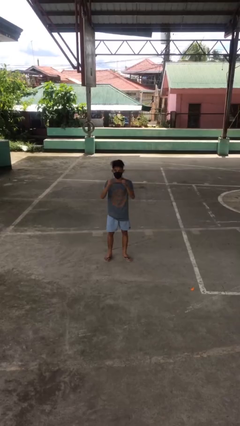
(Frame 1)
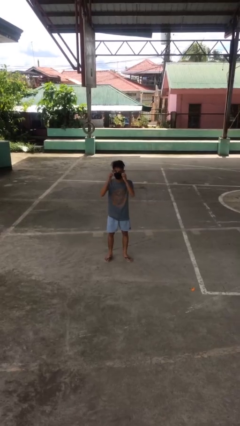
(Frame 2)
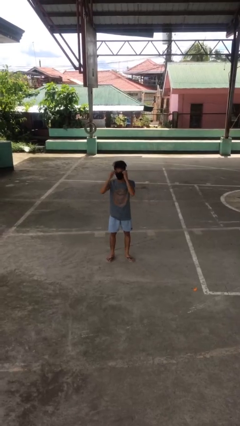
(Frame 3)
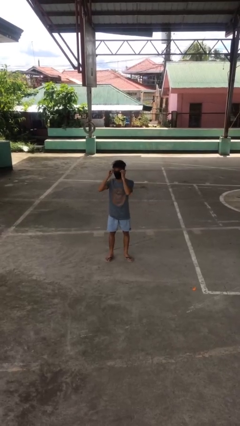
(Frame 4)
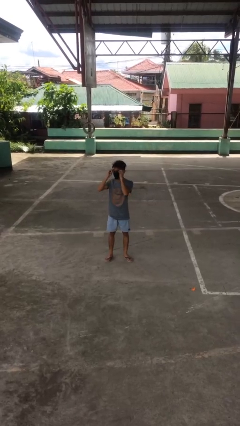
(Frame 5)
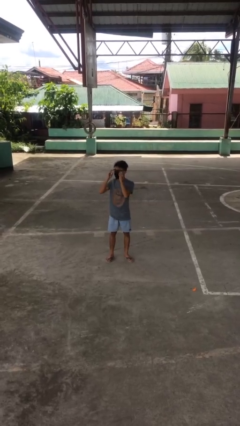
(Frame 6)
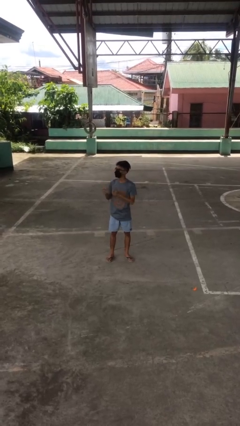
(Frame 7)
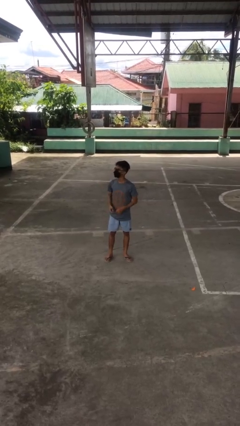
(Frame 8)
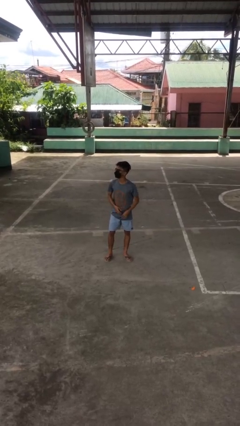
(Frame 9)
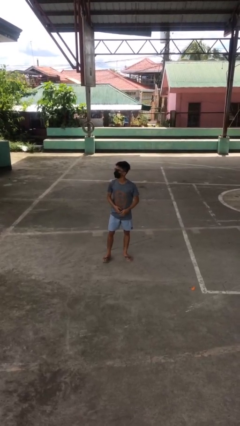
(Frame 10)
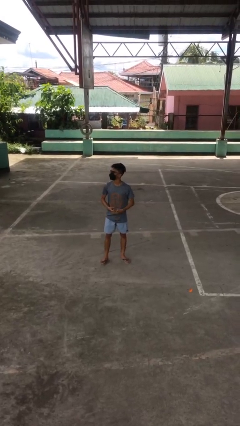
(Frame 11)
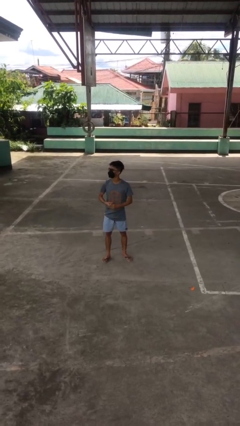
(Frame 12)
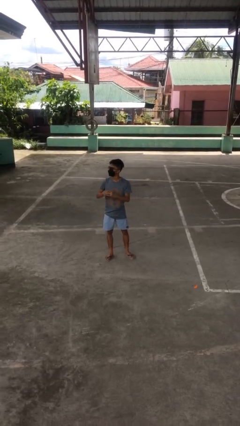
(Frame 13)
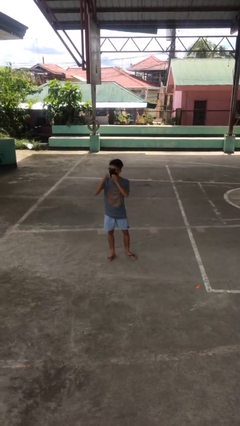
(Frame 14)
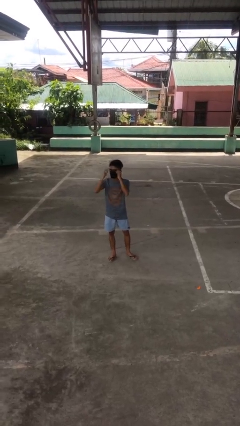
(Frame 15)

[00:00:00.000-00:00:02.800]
person puts on glasses

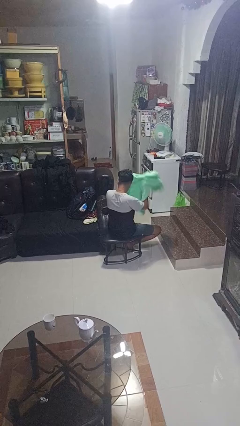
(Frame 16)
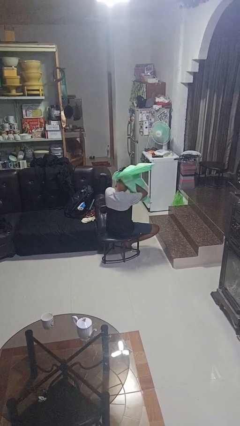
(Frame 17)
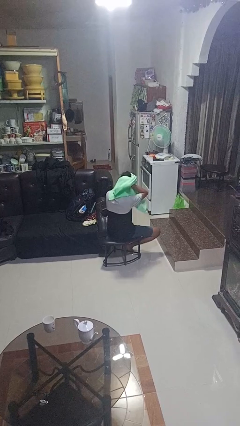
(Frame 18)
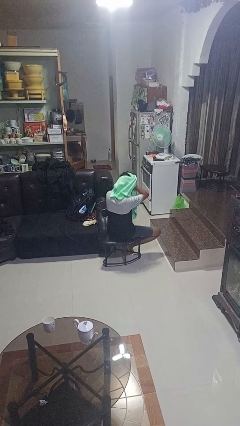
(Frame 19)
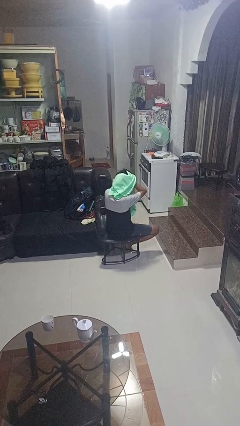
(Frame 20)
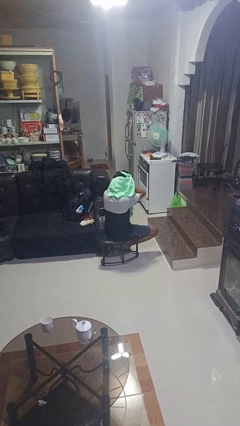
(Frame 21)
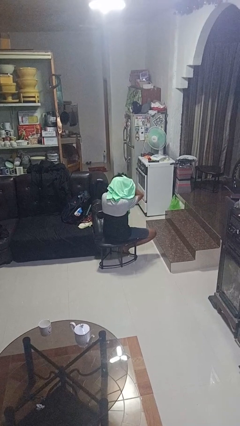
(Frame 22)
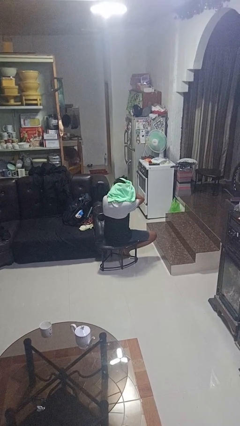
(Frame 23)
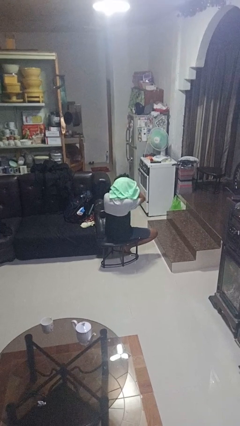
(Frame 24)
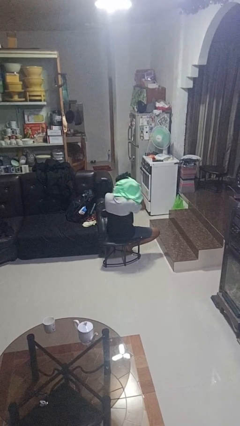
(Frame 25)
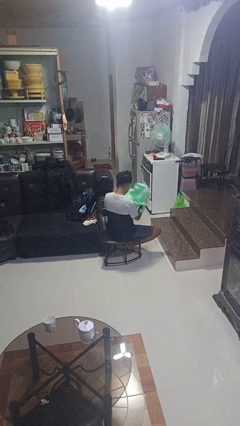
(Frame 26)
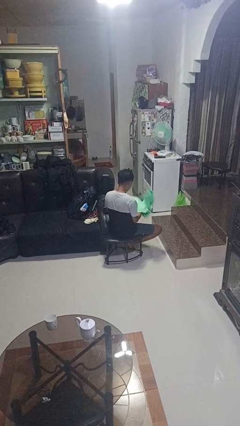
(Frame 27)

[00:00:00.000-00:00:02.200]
person dries hair with towel

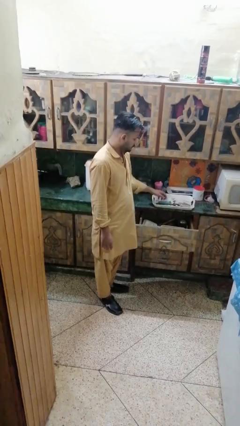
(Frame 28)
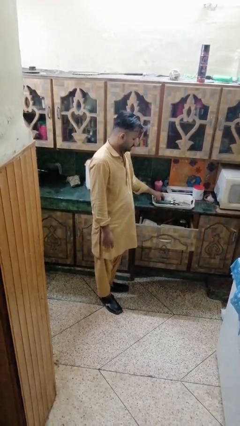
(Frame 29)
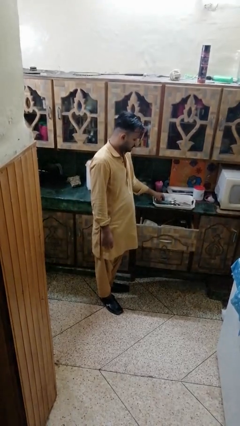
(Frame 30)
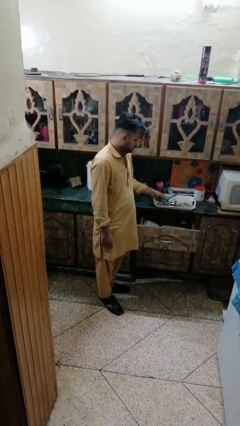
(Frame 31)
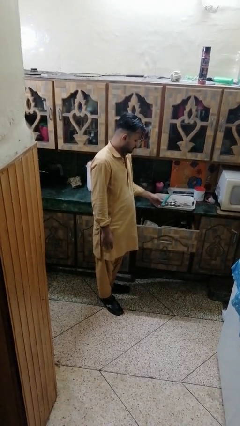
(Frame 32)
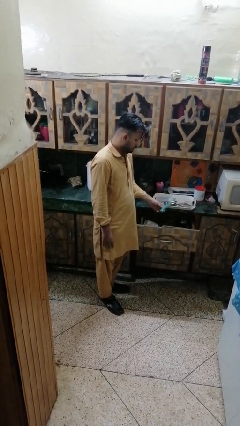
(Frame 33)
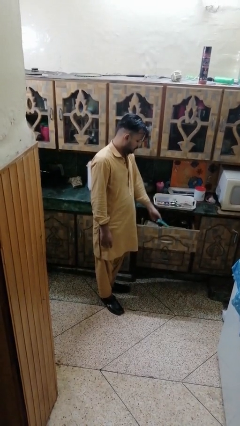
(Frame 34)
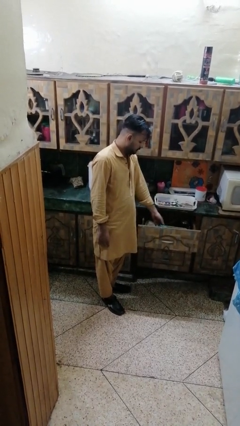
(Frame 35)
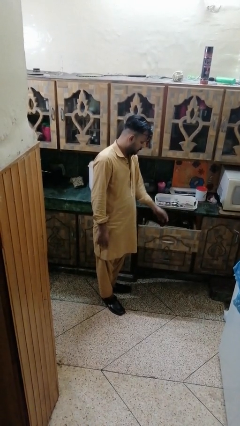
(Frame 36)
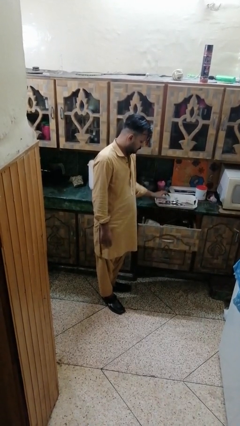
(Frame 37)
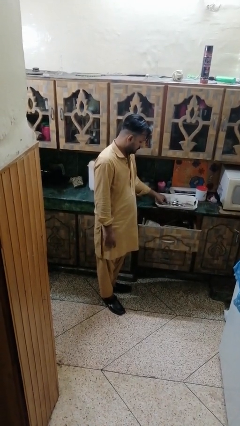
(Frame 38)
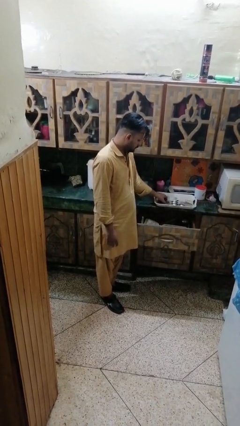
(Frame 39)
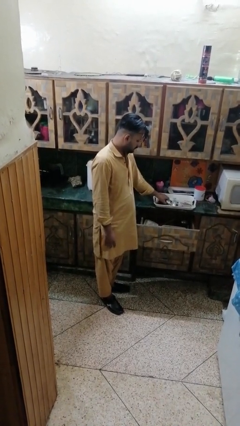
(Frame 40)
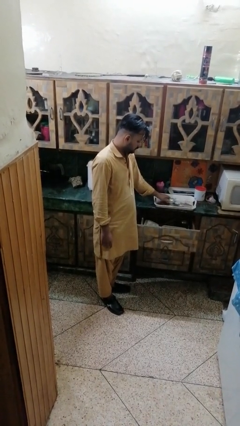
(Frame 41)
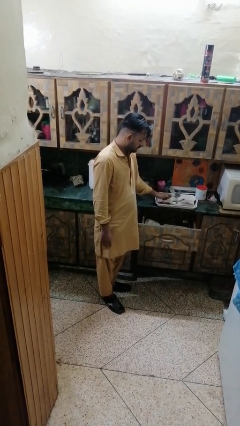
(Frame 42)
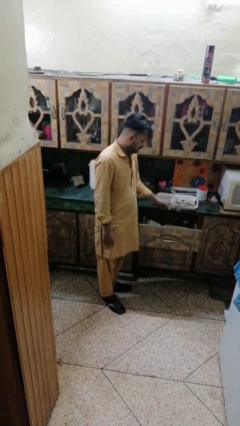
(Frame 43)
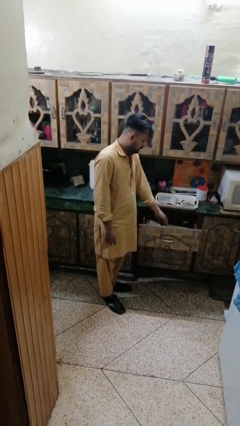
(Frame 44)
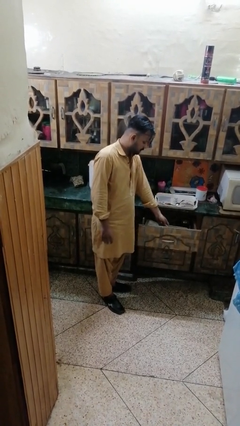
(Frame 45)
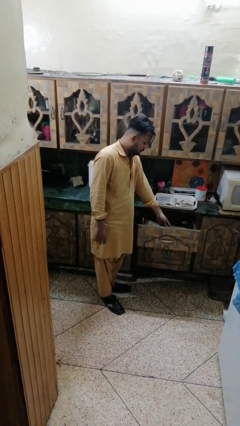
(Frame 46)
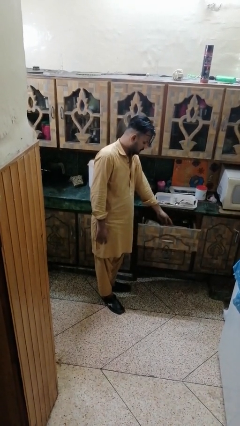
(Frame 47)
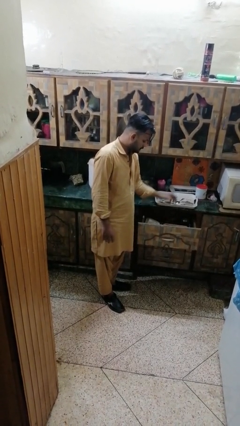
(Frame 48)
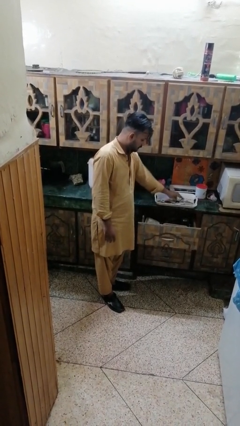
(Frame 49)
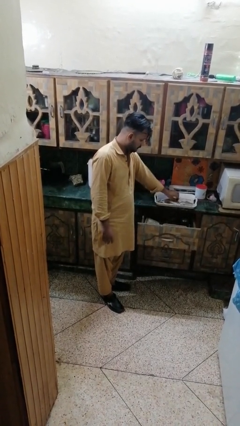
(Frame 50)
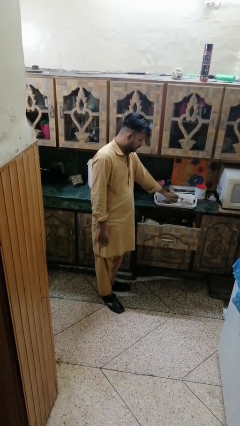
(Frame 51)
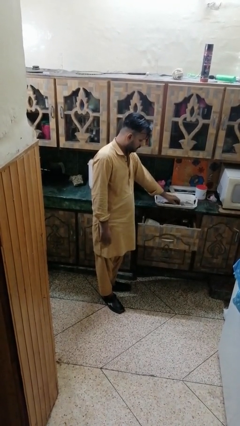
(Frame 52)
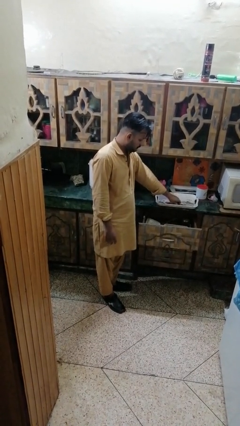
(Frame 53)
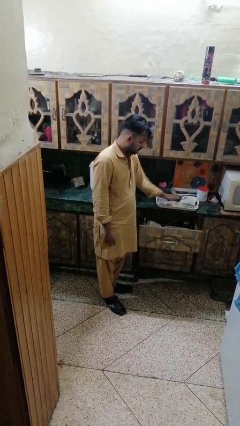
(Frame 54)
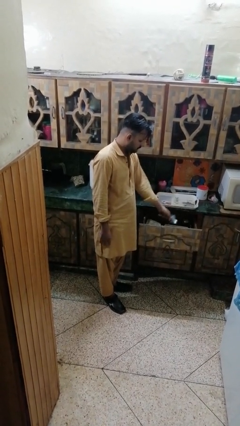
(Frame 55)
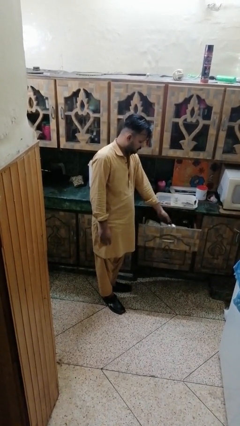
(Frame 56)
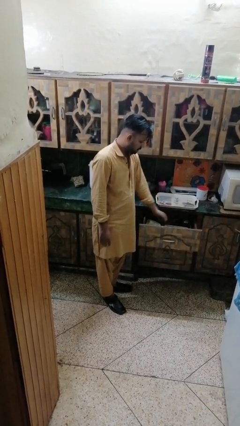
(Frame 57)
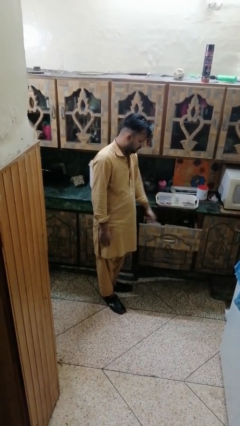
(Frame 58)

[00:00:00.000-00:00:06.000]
person puts object into kitchen drawer

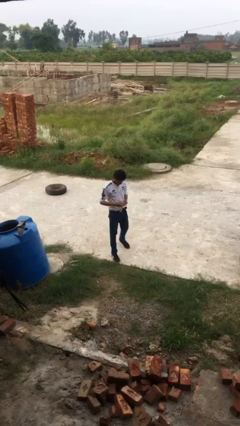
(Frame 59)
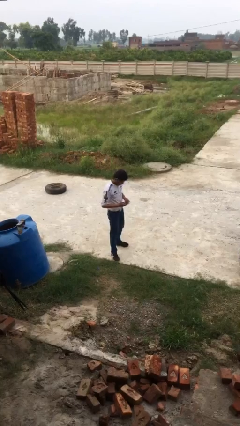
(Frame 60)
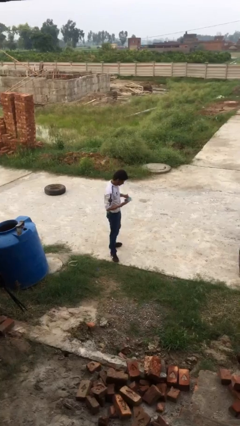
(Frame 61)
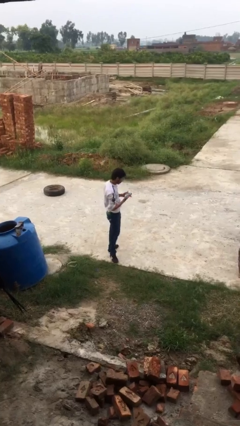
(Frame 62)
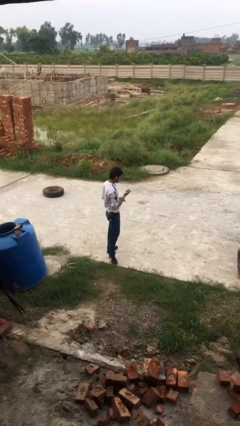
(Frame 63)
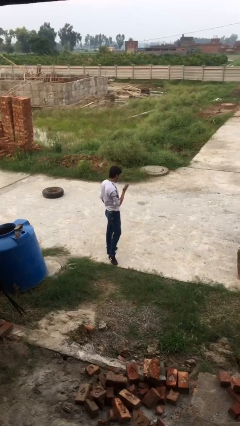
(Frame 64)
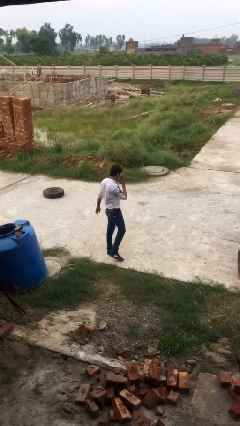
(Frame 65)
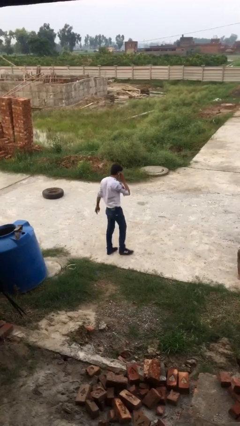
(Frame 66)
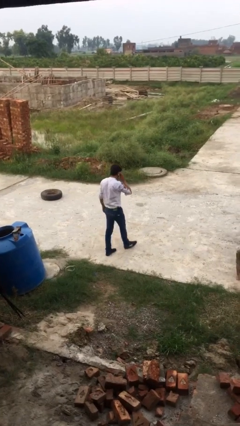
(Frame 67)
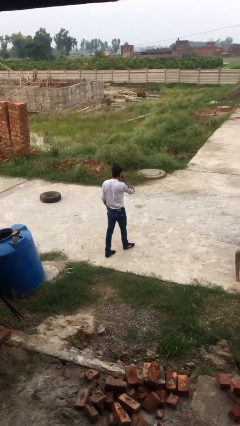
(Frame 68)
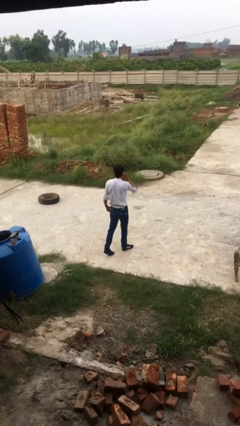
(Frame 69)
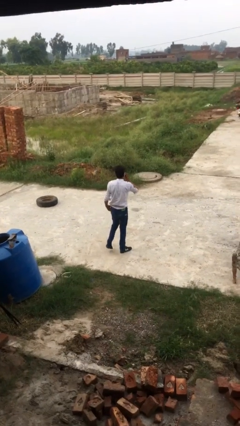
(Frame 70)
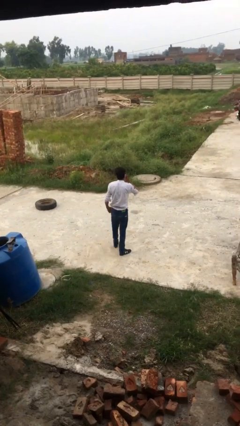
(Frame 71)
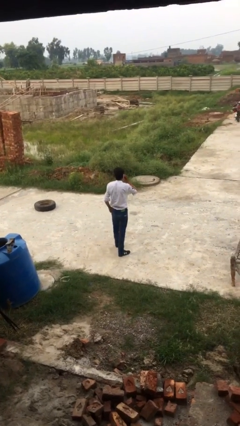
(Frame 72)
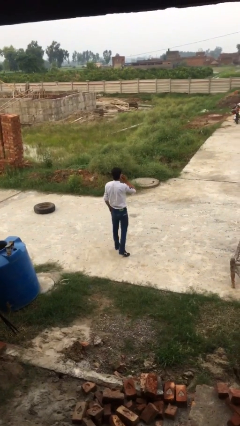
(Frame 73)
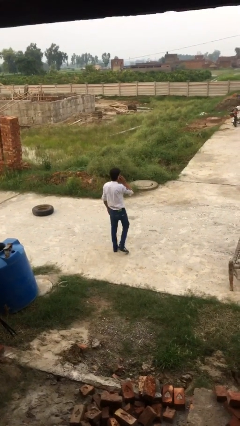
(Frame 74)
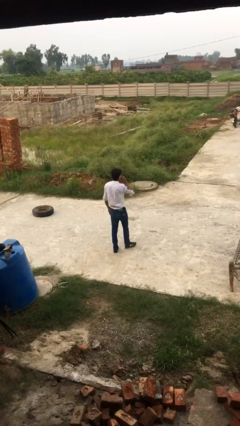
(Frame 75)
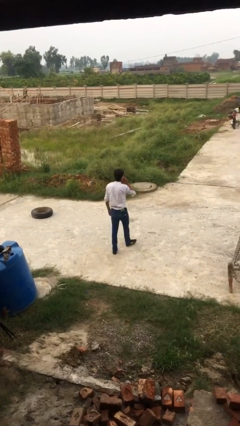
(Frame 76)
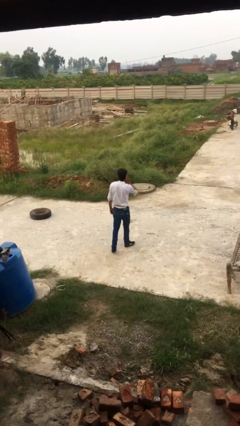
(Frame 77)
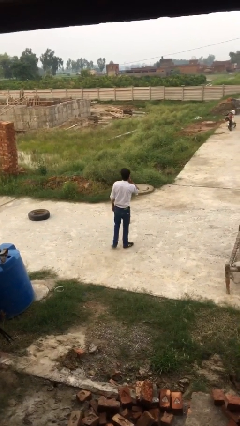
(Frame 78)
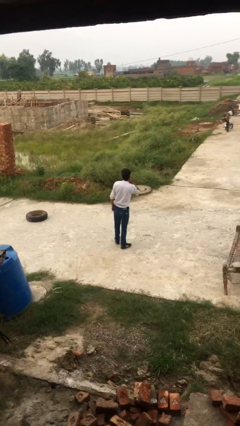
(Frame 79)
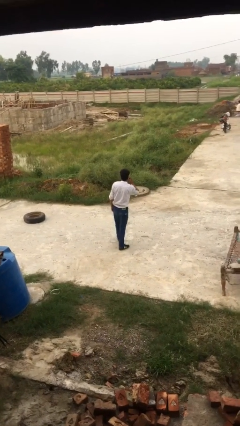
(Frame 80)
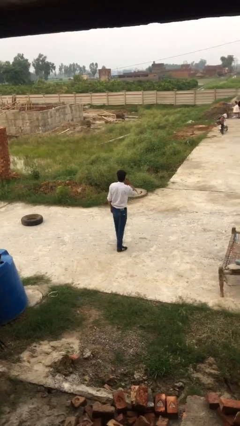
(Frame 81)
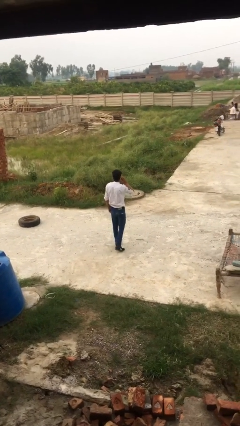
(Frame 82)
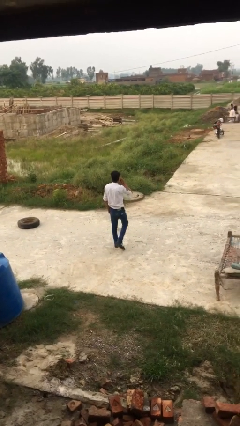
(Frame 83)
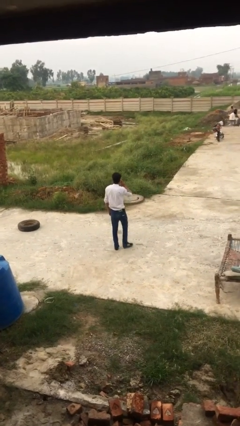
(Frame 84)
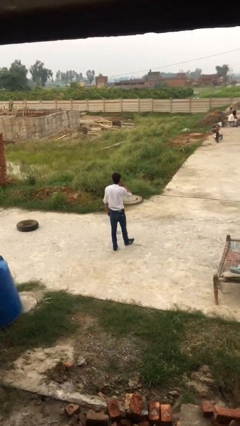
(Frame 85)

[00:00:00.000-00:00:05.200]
person talks on phone

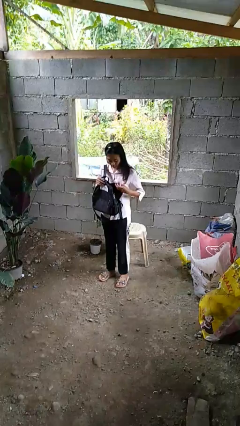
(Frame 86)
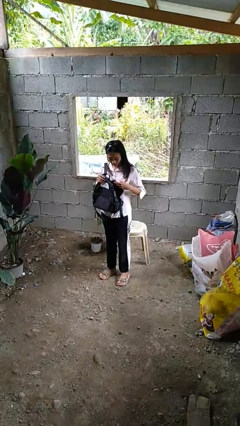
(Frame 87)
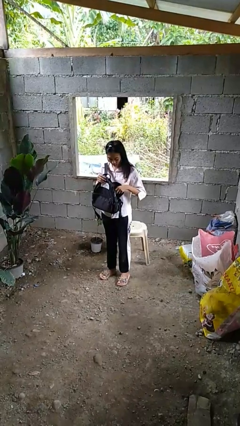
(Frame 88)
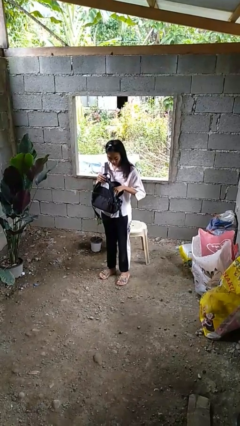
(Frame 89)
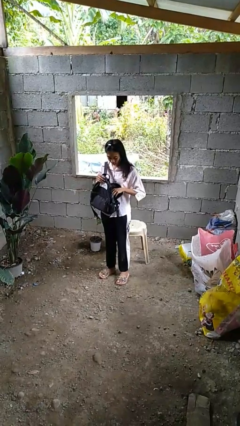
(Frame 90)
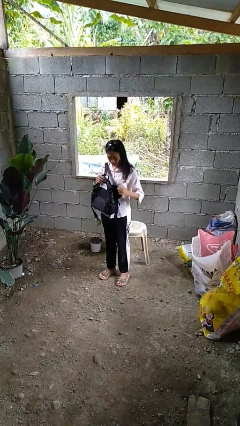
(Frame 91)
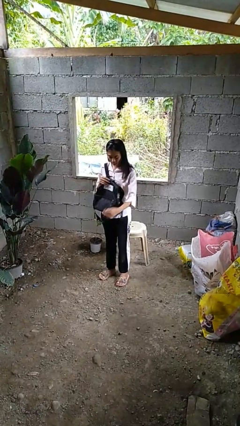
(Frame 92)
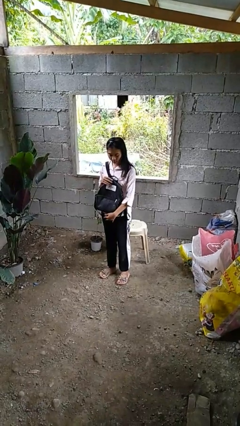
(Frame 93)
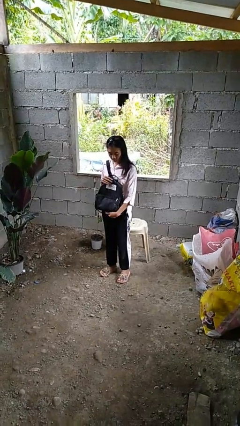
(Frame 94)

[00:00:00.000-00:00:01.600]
person puts object into backpack
